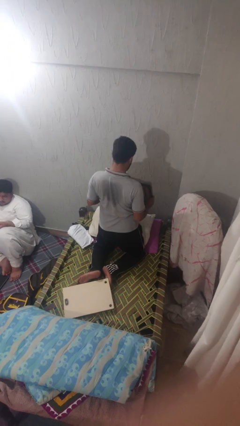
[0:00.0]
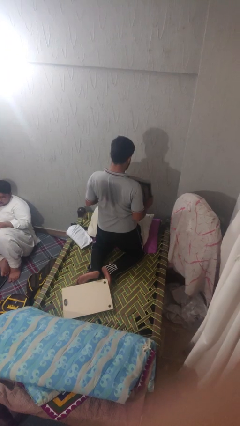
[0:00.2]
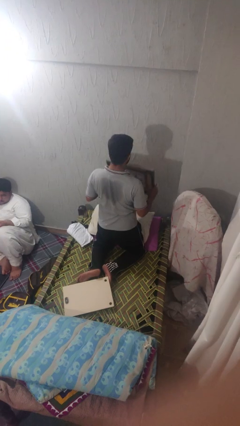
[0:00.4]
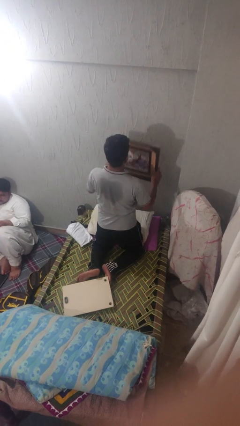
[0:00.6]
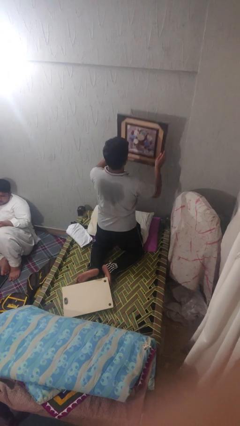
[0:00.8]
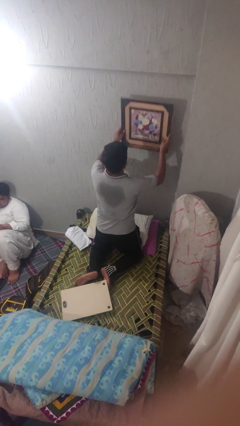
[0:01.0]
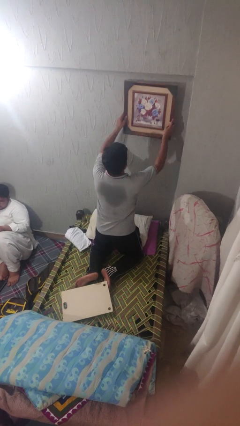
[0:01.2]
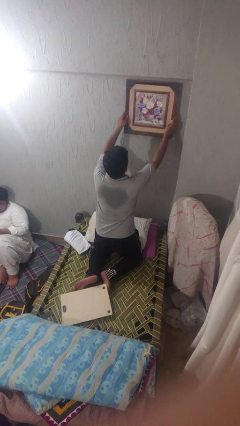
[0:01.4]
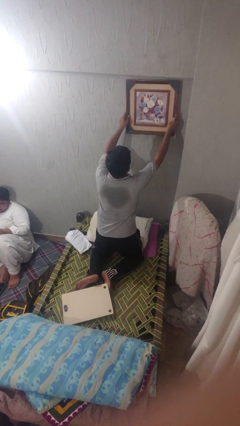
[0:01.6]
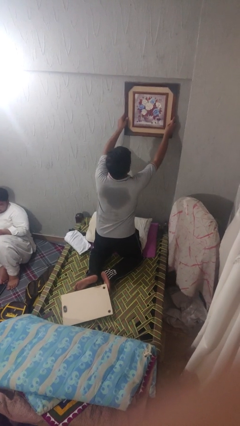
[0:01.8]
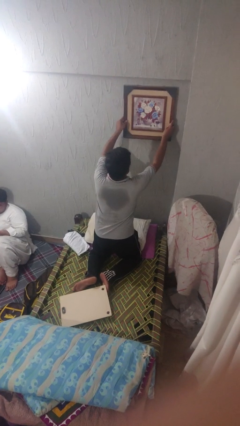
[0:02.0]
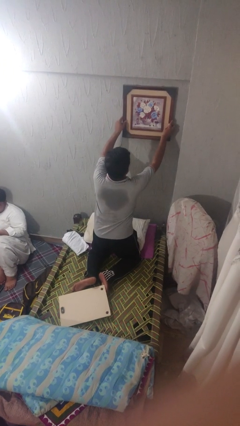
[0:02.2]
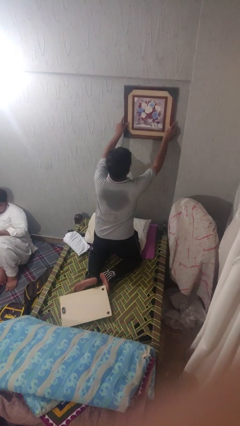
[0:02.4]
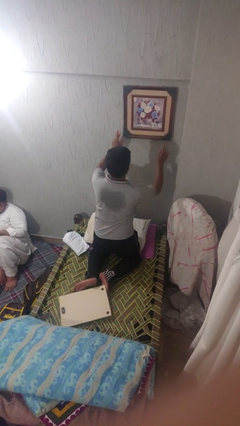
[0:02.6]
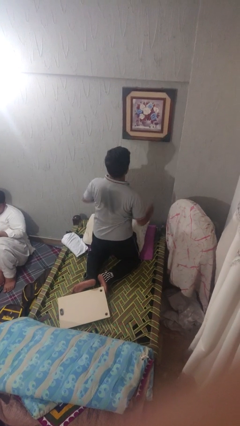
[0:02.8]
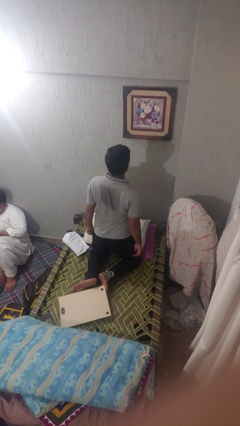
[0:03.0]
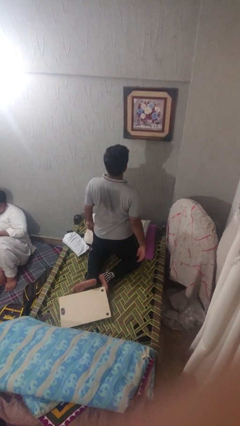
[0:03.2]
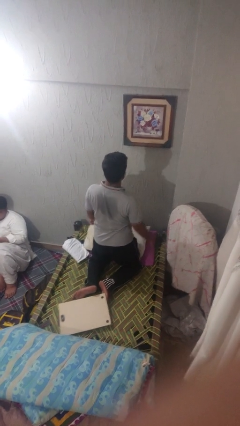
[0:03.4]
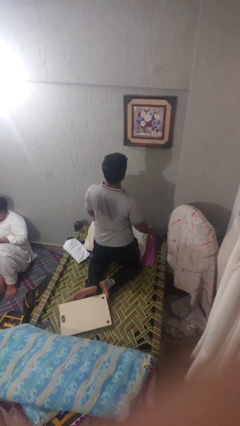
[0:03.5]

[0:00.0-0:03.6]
person puts up picture frame

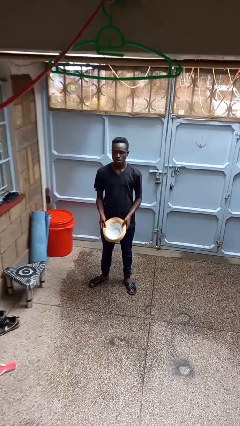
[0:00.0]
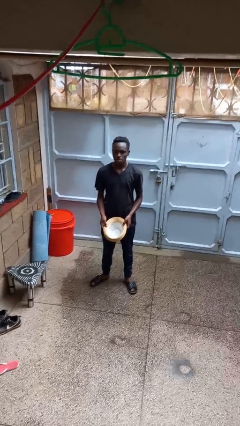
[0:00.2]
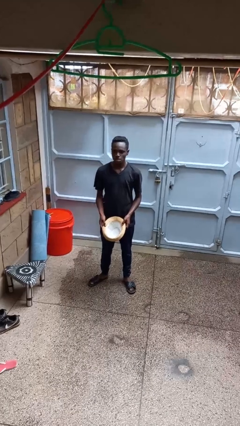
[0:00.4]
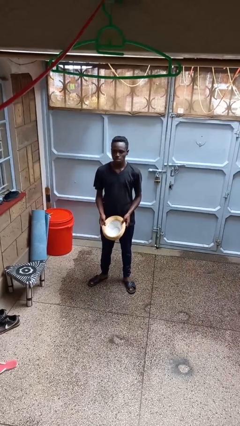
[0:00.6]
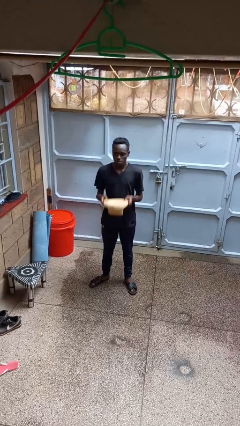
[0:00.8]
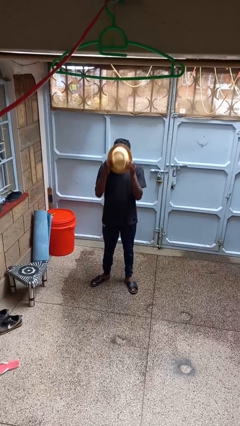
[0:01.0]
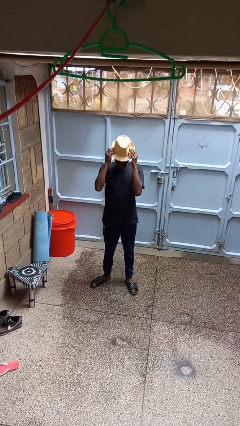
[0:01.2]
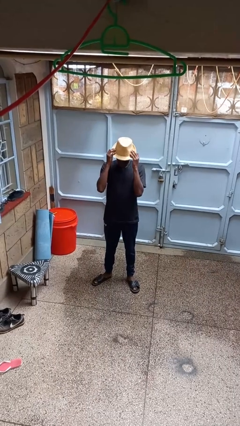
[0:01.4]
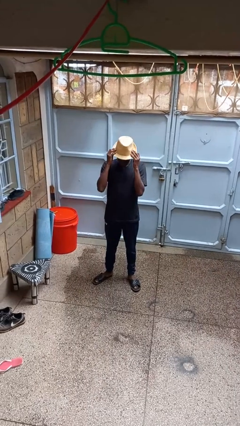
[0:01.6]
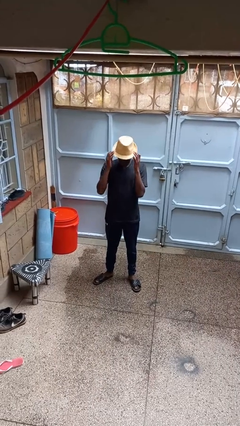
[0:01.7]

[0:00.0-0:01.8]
person puts on hat

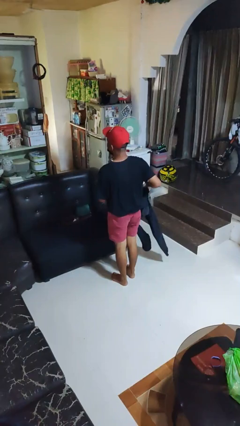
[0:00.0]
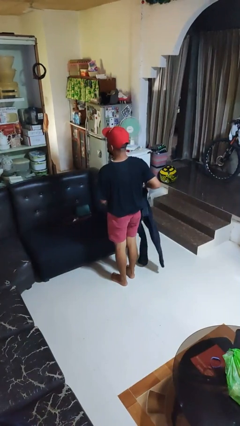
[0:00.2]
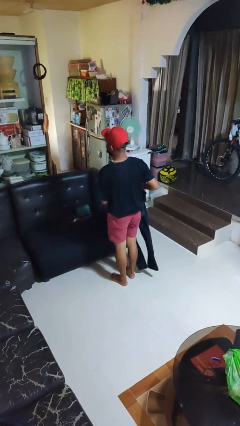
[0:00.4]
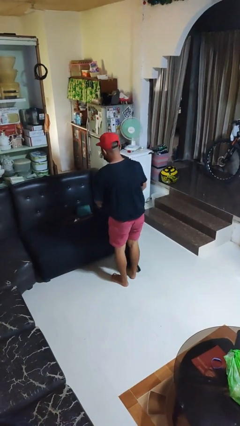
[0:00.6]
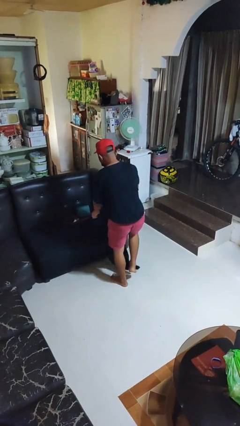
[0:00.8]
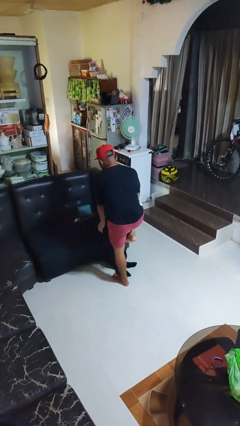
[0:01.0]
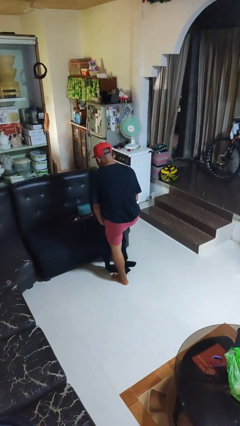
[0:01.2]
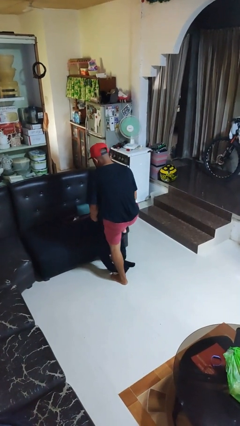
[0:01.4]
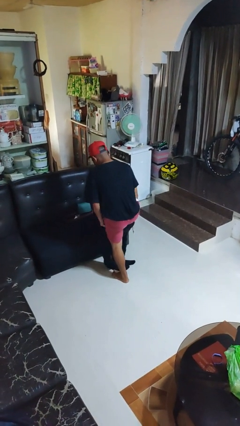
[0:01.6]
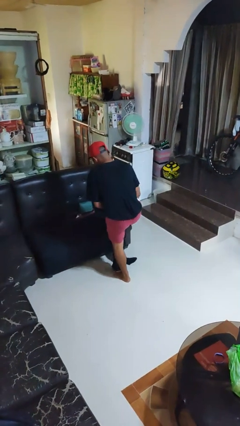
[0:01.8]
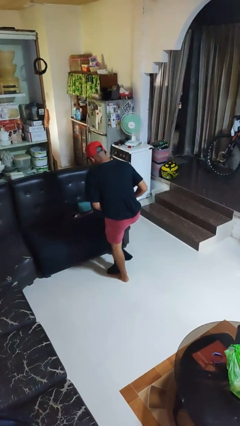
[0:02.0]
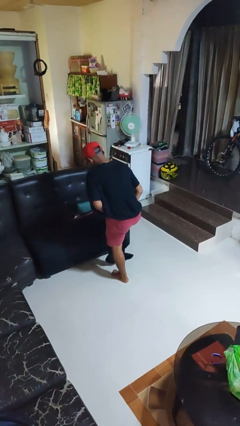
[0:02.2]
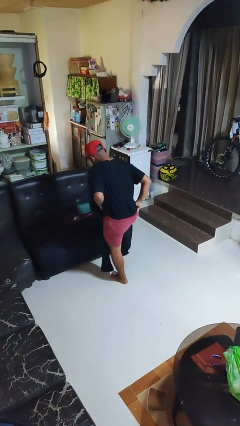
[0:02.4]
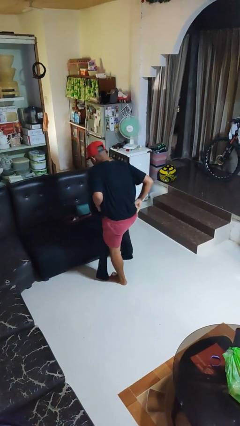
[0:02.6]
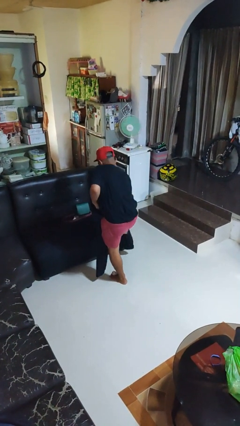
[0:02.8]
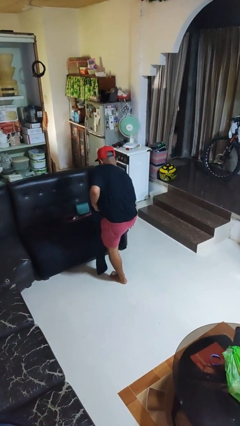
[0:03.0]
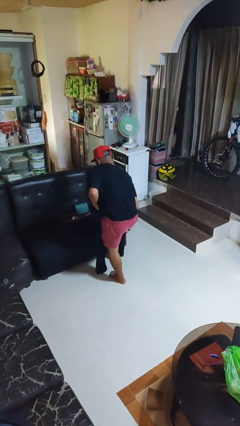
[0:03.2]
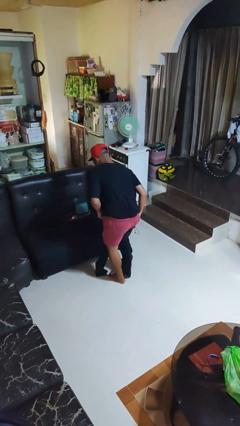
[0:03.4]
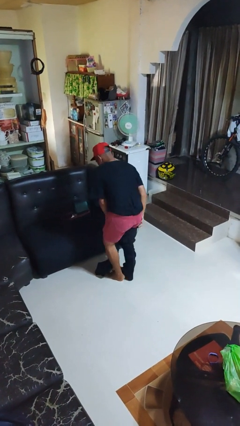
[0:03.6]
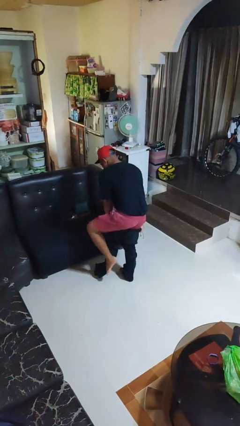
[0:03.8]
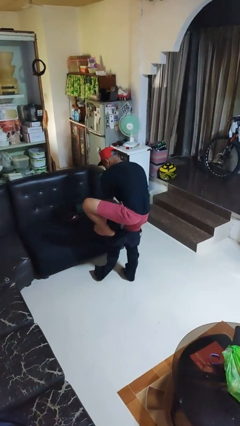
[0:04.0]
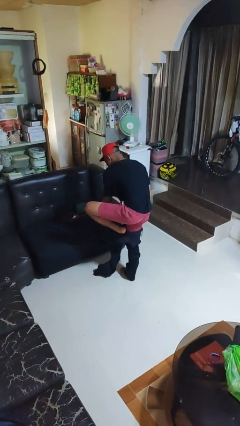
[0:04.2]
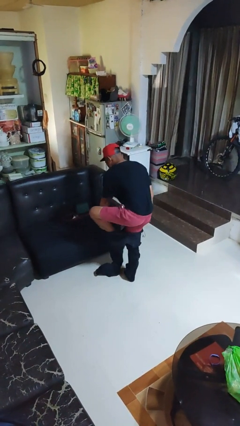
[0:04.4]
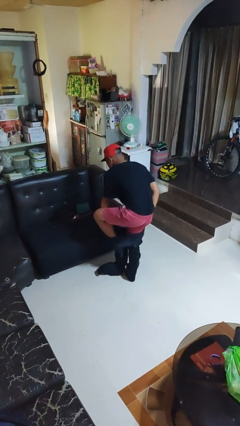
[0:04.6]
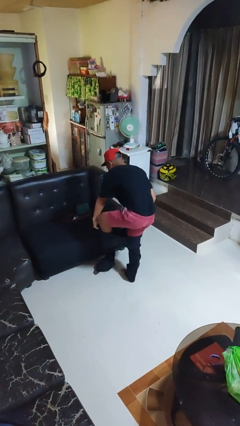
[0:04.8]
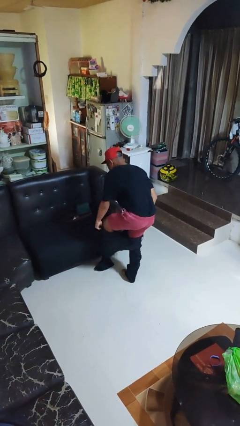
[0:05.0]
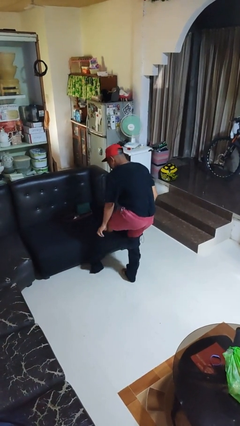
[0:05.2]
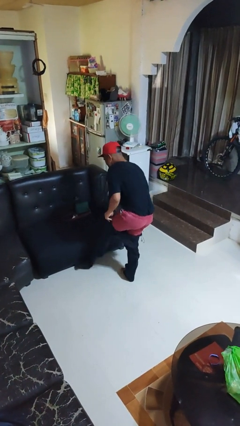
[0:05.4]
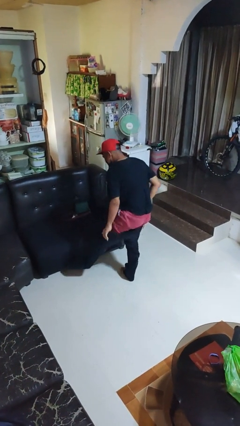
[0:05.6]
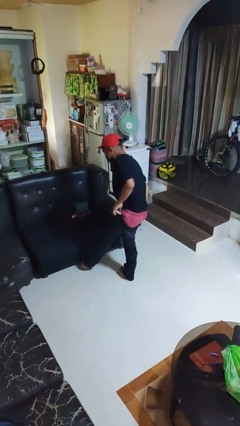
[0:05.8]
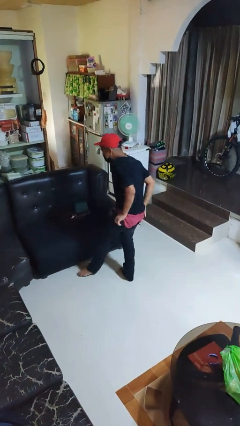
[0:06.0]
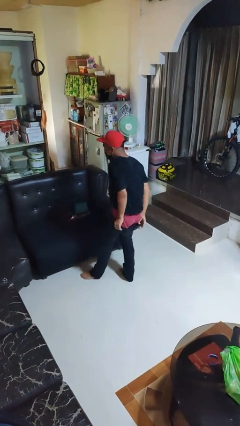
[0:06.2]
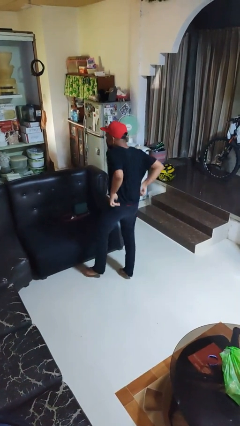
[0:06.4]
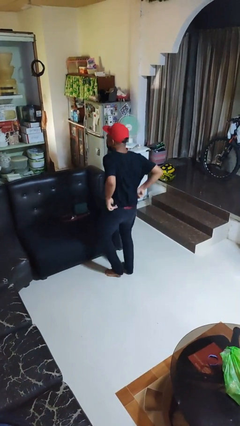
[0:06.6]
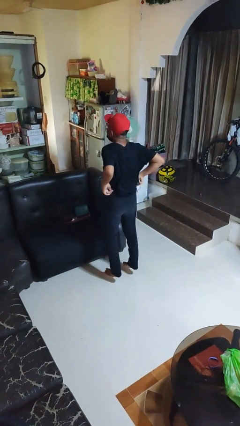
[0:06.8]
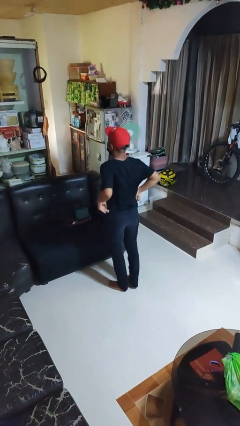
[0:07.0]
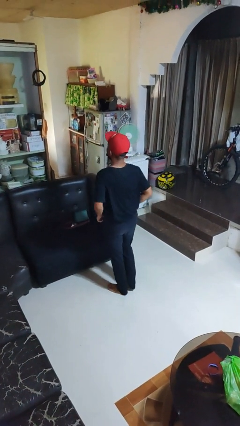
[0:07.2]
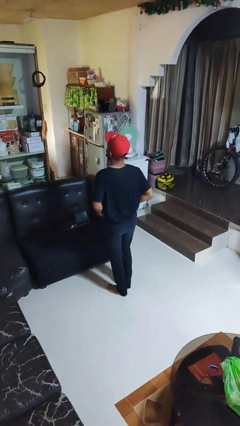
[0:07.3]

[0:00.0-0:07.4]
person puts on pants

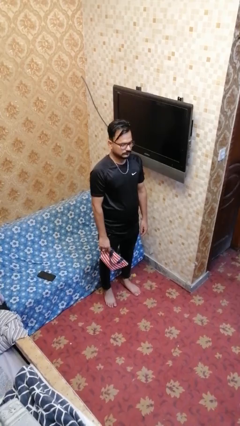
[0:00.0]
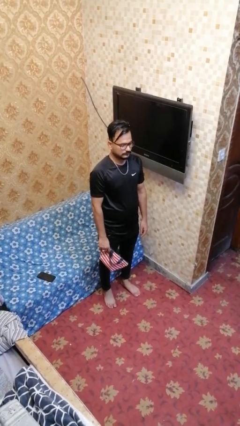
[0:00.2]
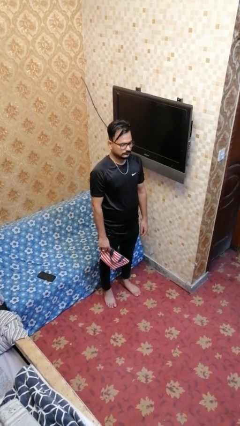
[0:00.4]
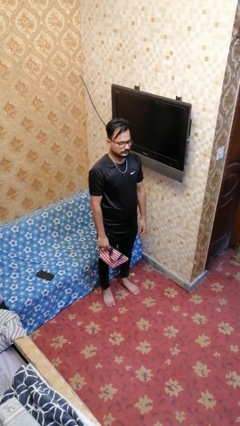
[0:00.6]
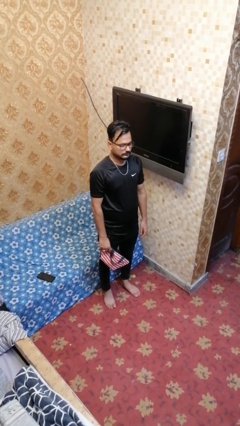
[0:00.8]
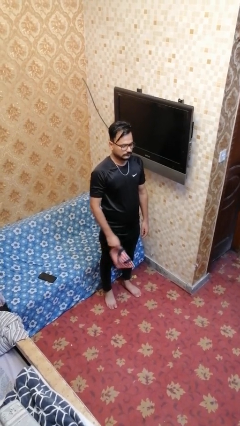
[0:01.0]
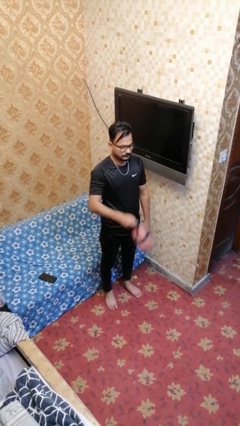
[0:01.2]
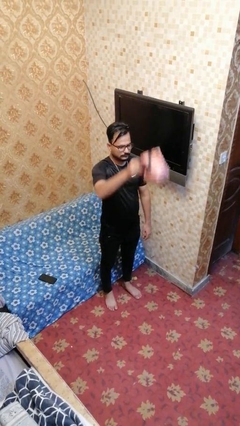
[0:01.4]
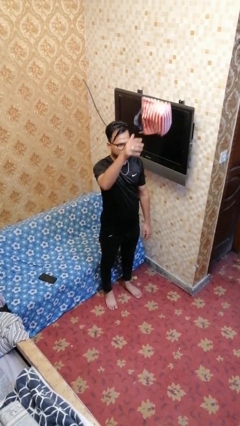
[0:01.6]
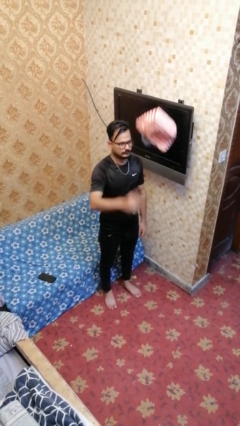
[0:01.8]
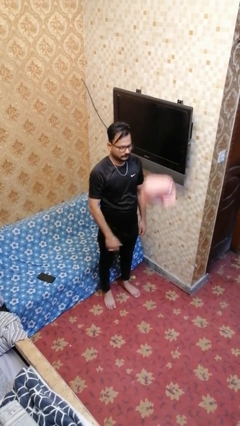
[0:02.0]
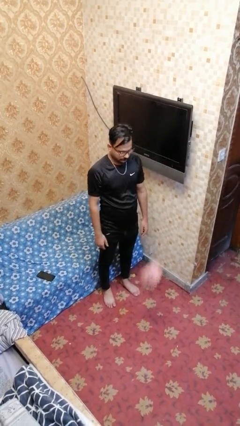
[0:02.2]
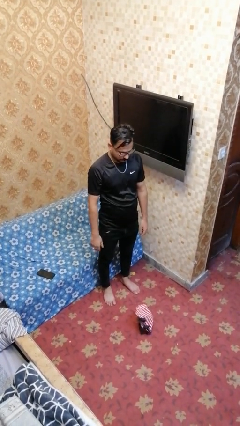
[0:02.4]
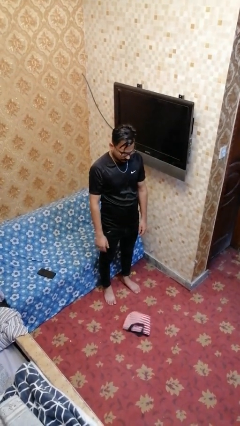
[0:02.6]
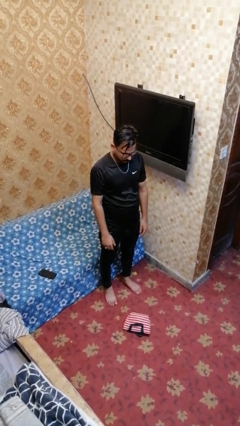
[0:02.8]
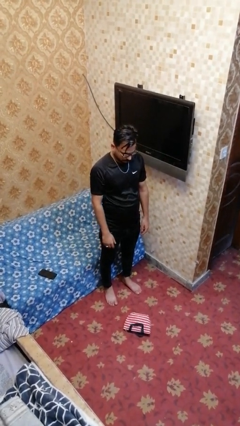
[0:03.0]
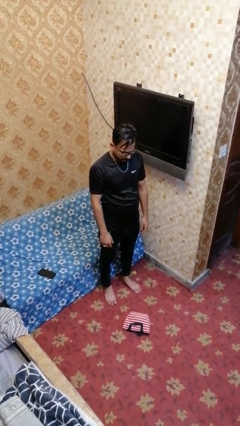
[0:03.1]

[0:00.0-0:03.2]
person throws object into air

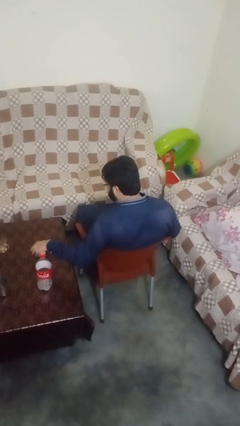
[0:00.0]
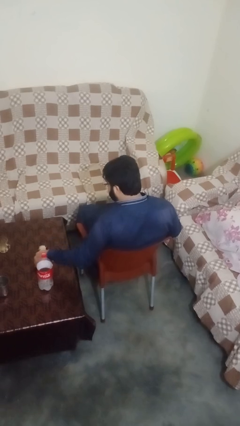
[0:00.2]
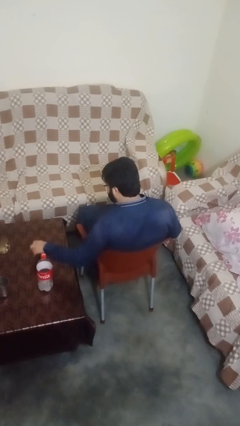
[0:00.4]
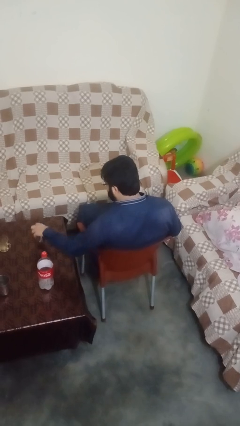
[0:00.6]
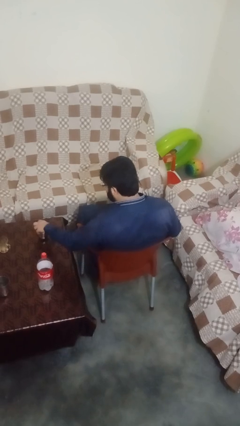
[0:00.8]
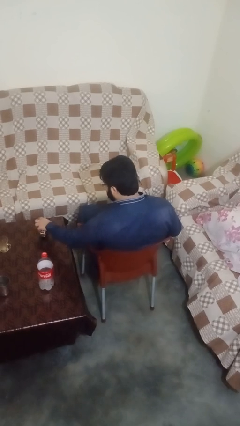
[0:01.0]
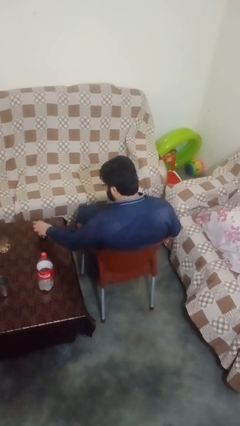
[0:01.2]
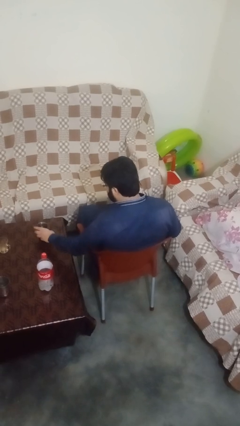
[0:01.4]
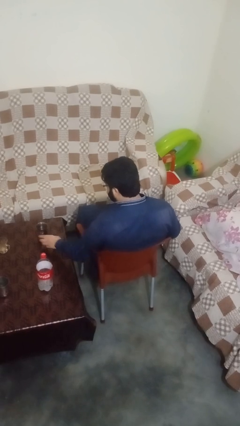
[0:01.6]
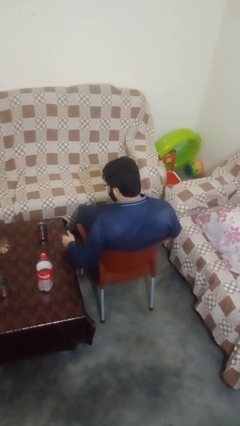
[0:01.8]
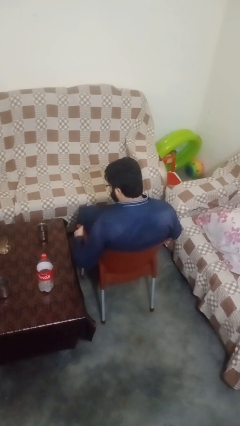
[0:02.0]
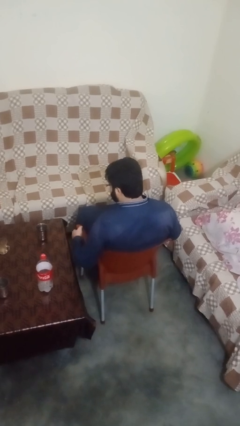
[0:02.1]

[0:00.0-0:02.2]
person sets upright glass
